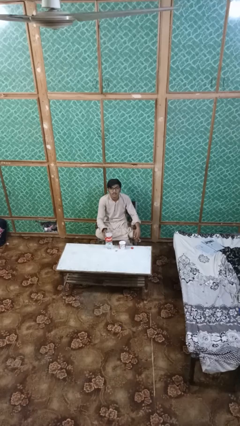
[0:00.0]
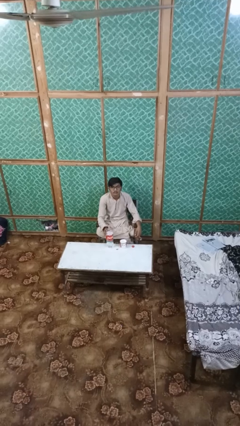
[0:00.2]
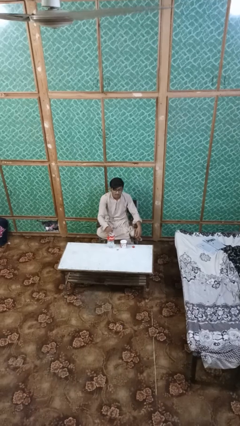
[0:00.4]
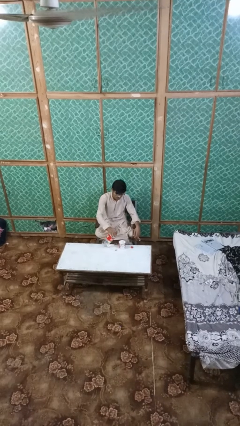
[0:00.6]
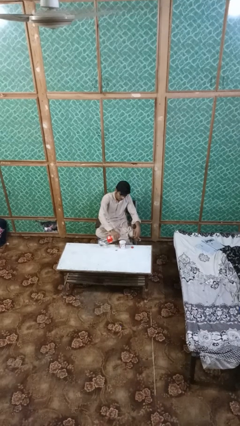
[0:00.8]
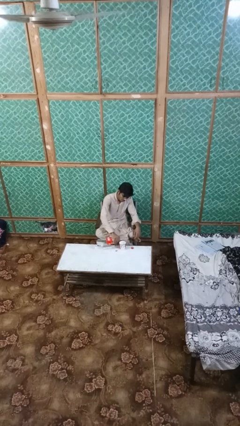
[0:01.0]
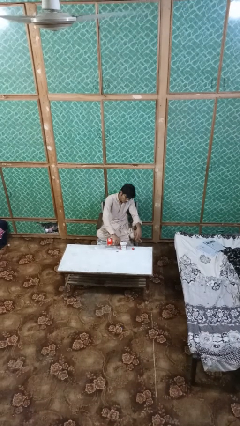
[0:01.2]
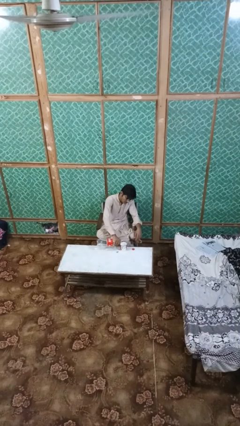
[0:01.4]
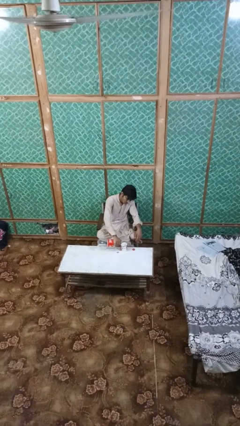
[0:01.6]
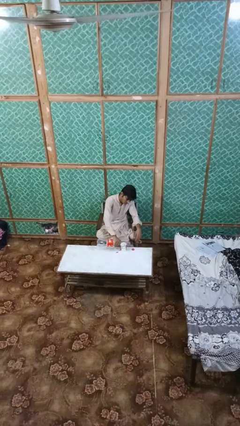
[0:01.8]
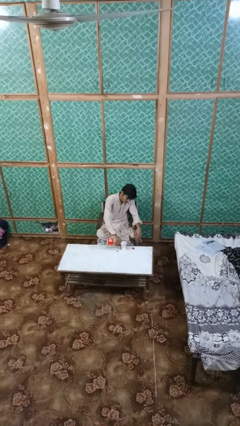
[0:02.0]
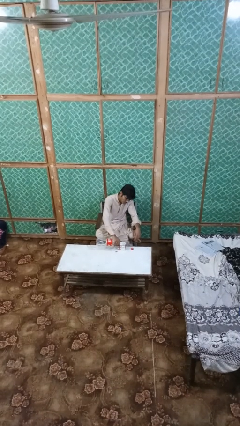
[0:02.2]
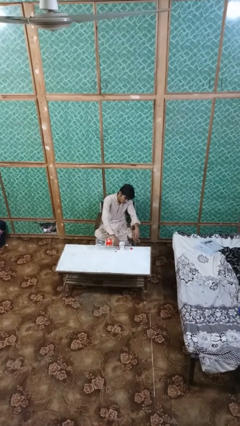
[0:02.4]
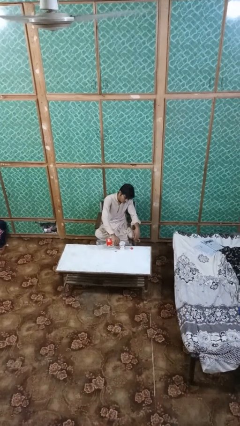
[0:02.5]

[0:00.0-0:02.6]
person pours liquid into cup

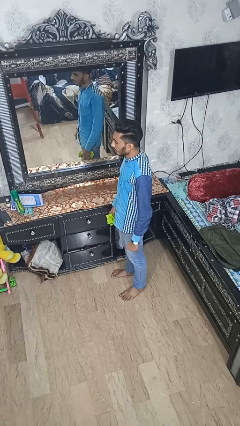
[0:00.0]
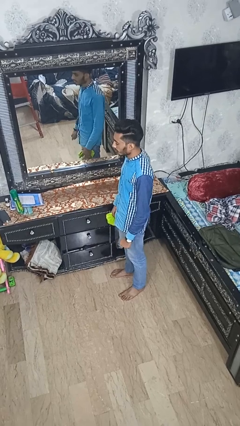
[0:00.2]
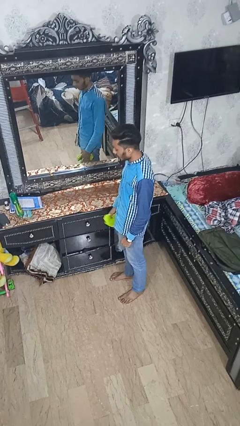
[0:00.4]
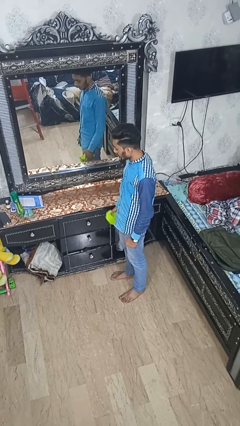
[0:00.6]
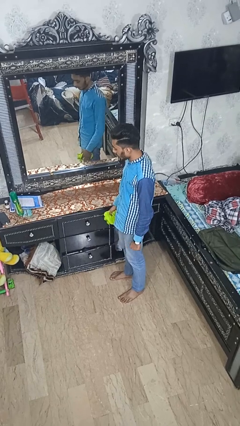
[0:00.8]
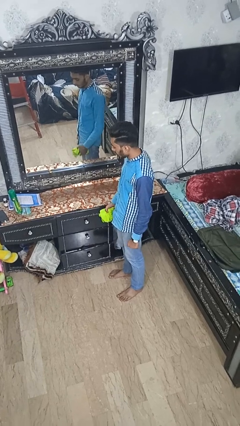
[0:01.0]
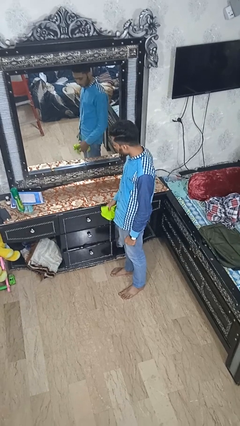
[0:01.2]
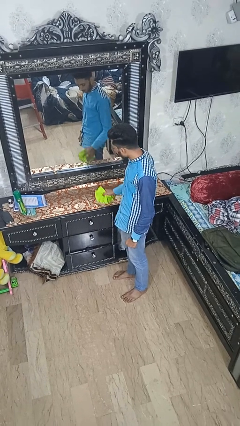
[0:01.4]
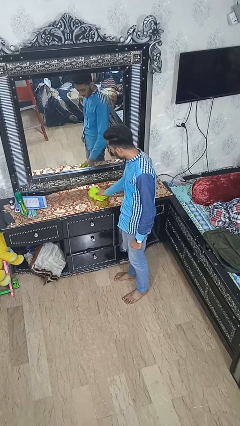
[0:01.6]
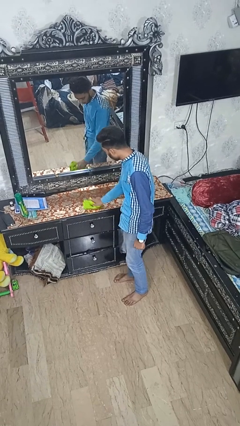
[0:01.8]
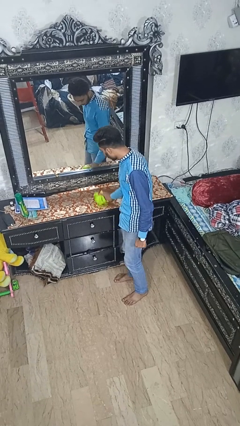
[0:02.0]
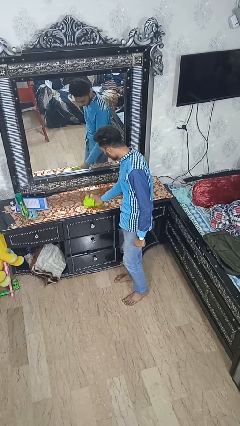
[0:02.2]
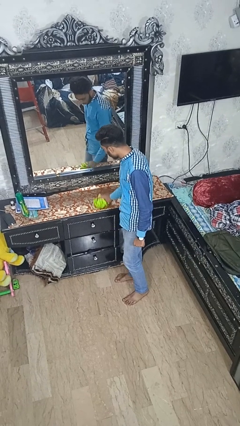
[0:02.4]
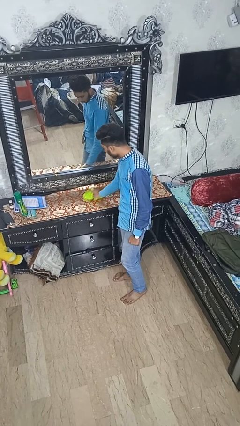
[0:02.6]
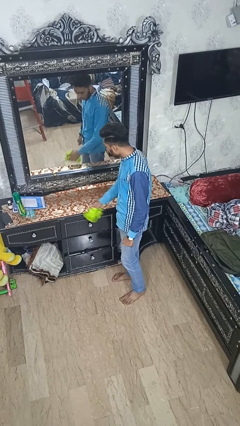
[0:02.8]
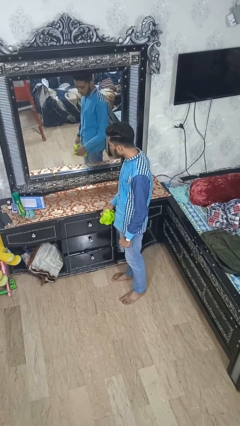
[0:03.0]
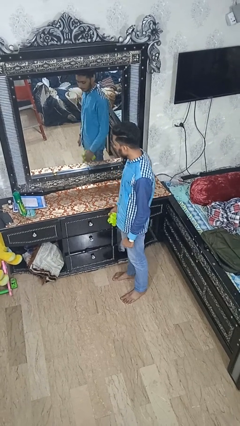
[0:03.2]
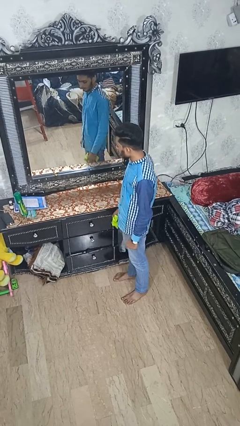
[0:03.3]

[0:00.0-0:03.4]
person cleans table with rag

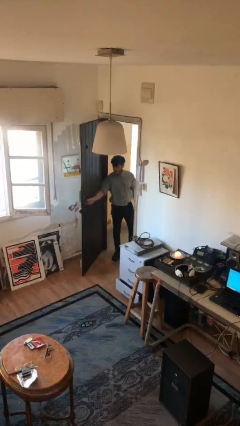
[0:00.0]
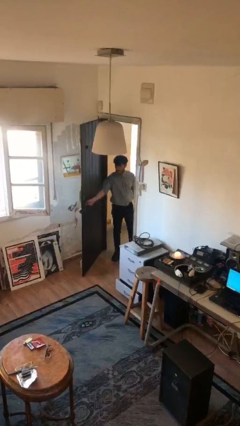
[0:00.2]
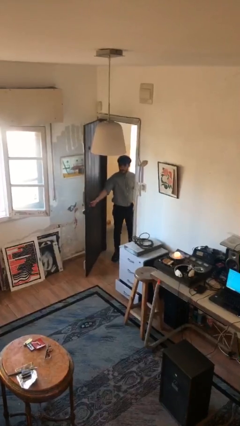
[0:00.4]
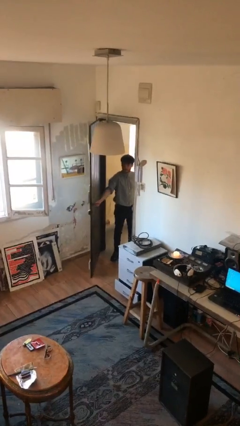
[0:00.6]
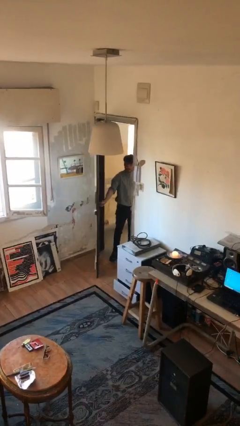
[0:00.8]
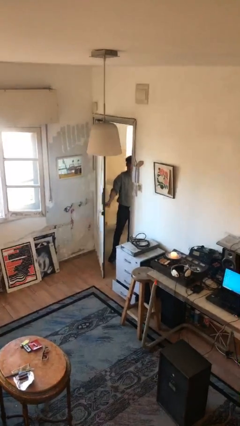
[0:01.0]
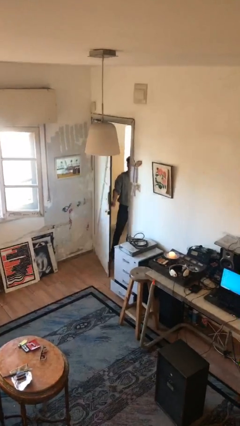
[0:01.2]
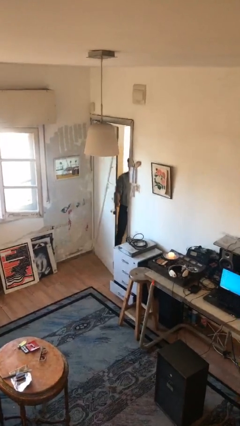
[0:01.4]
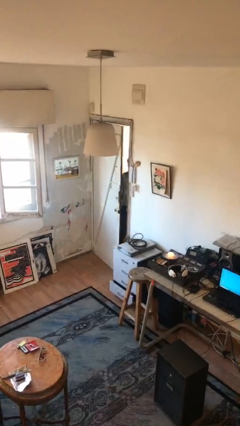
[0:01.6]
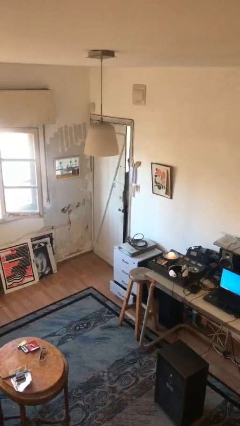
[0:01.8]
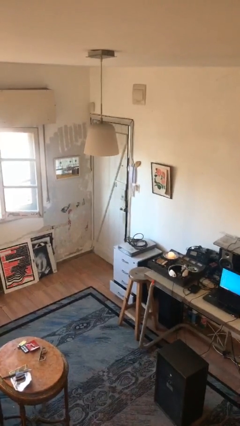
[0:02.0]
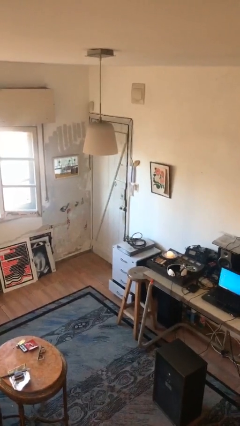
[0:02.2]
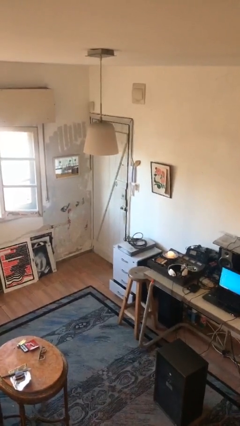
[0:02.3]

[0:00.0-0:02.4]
person closes facility door

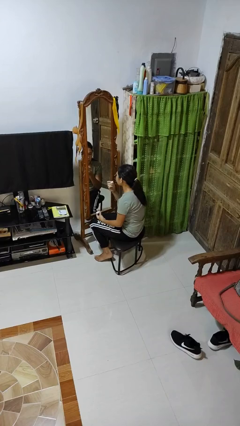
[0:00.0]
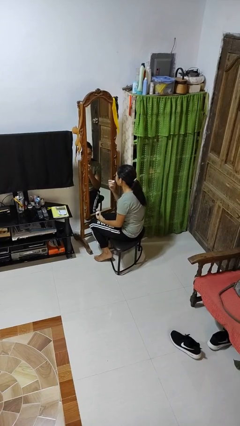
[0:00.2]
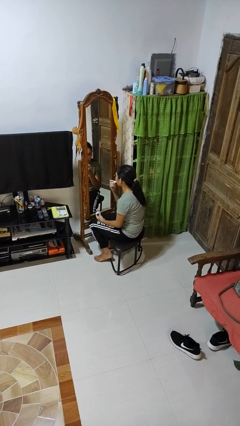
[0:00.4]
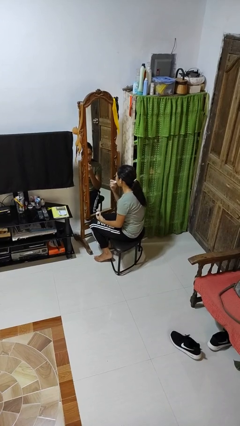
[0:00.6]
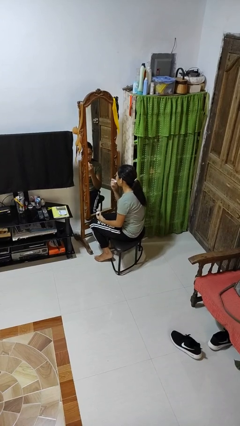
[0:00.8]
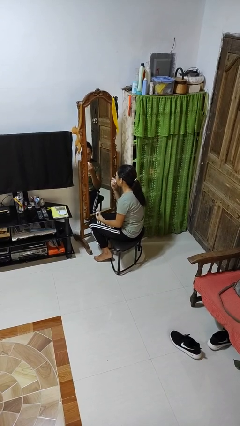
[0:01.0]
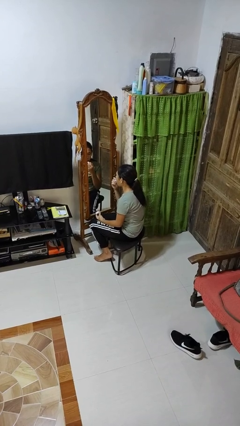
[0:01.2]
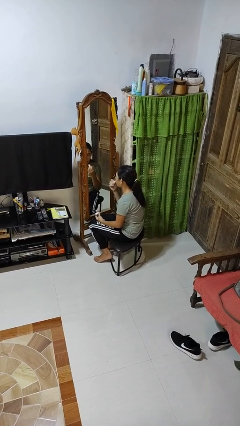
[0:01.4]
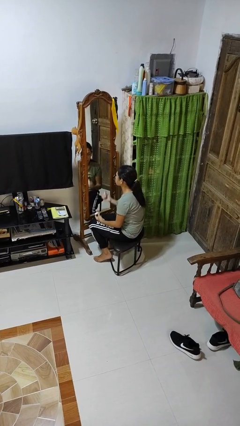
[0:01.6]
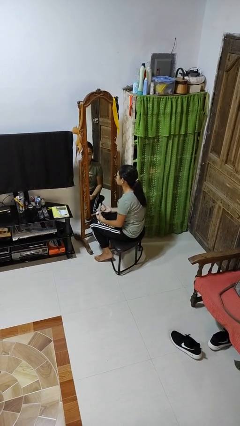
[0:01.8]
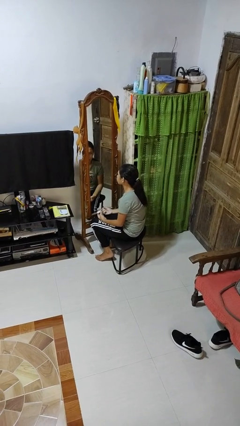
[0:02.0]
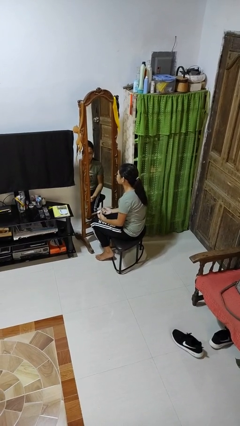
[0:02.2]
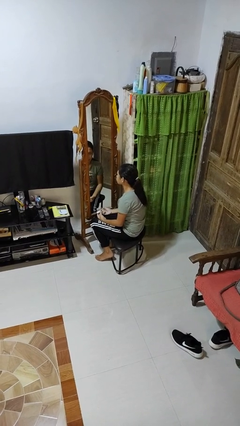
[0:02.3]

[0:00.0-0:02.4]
person applies lip makeup

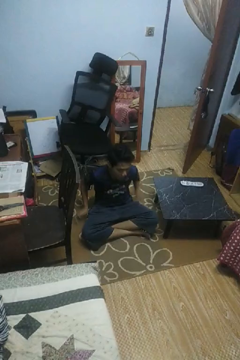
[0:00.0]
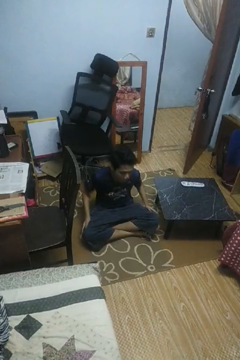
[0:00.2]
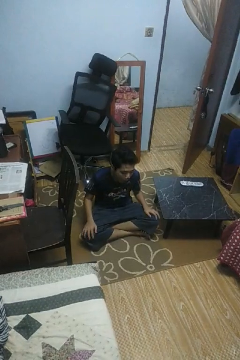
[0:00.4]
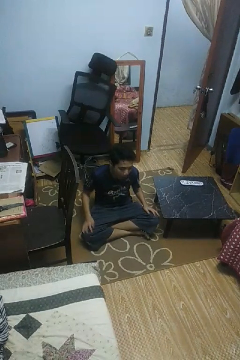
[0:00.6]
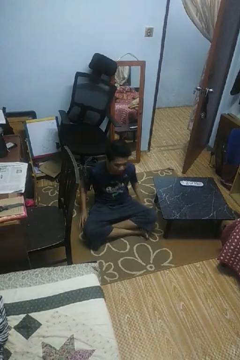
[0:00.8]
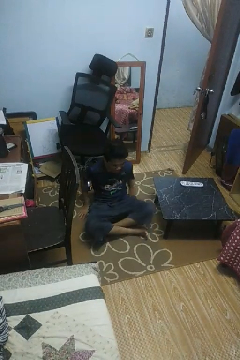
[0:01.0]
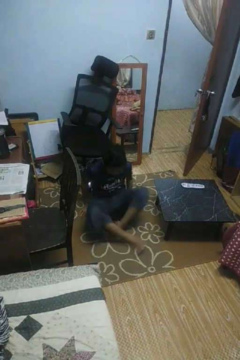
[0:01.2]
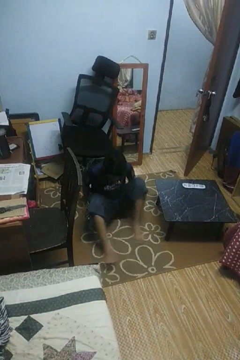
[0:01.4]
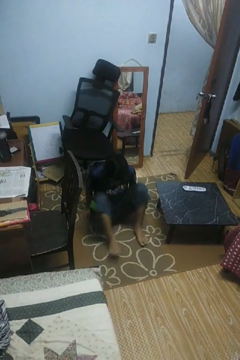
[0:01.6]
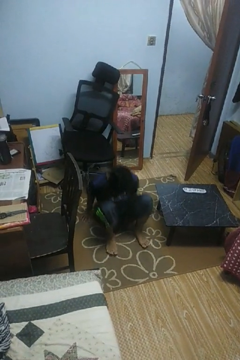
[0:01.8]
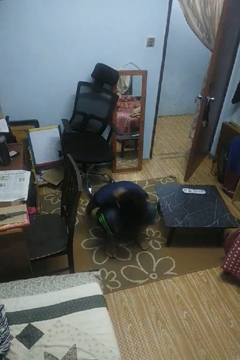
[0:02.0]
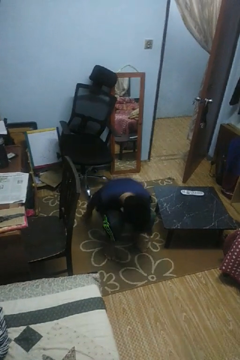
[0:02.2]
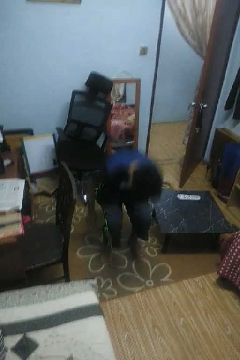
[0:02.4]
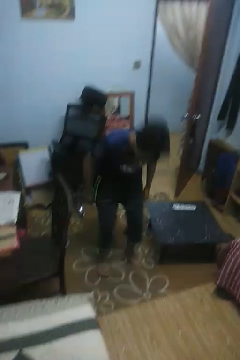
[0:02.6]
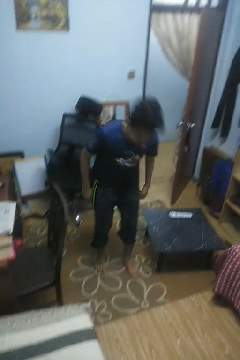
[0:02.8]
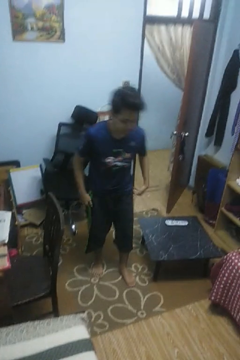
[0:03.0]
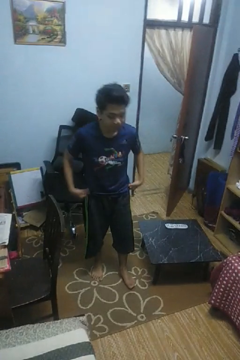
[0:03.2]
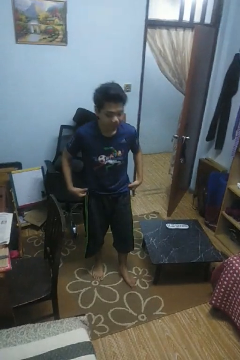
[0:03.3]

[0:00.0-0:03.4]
person stands up from floor

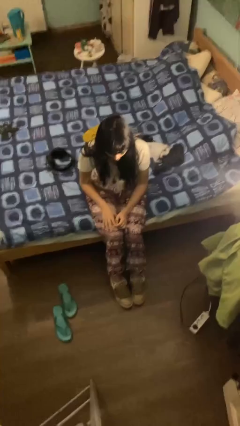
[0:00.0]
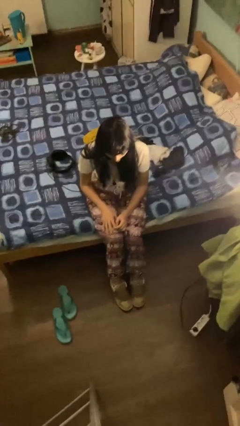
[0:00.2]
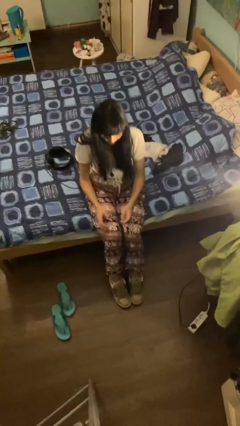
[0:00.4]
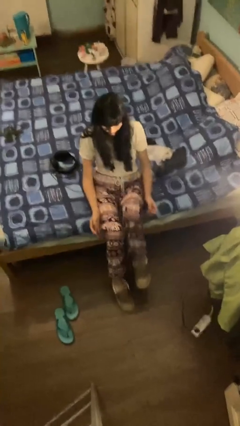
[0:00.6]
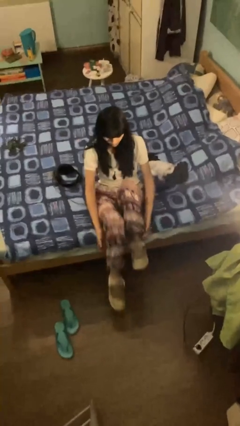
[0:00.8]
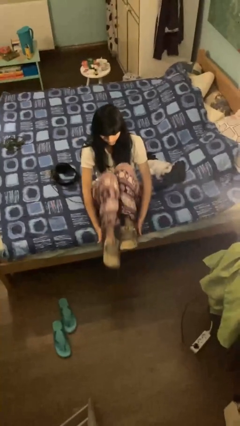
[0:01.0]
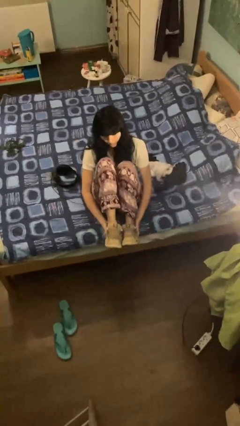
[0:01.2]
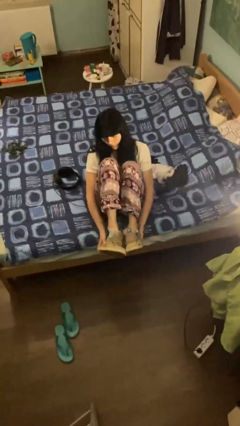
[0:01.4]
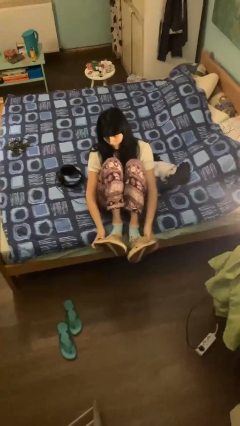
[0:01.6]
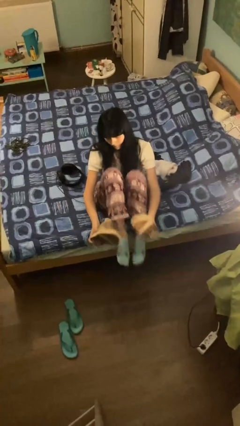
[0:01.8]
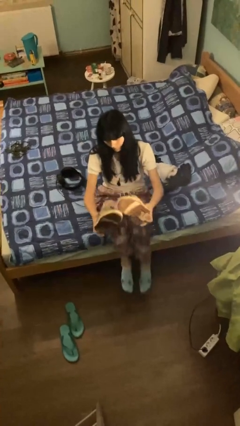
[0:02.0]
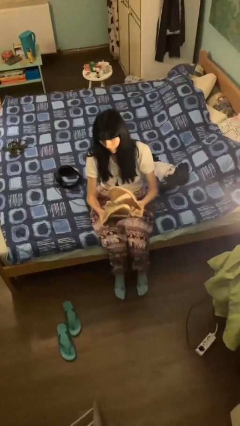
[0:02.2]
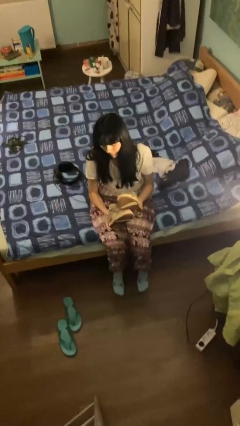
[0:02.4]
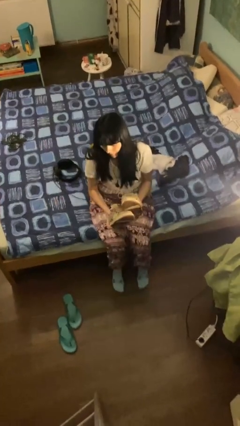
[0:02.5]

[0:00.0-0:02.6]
person takes off shoes

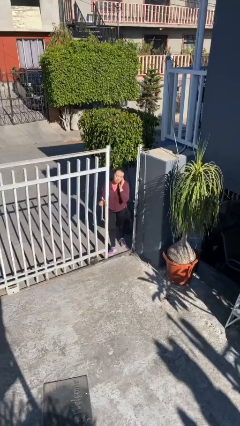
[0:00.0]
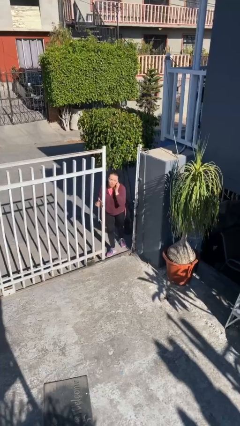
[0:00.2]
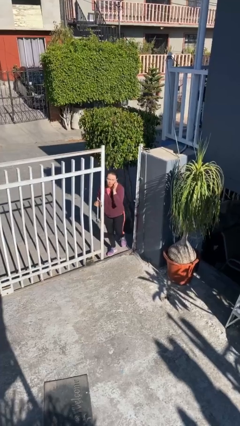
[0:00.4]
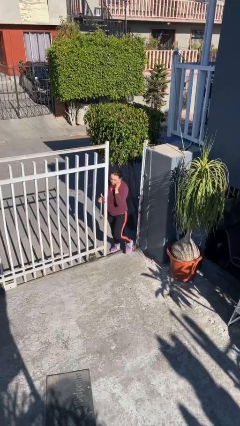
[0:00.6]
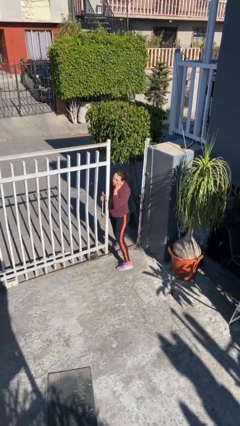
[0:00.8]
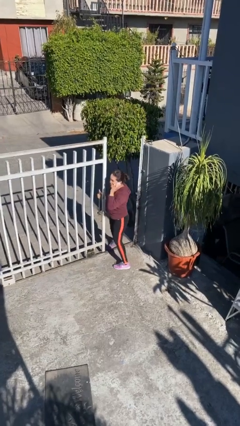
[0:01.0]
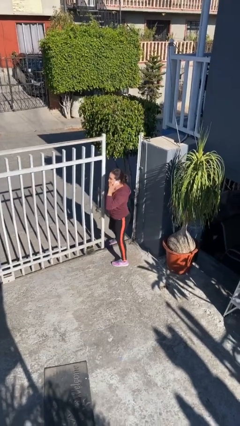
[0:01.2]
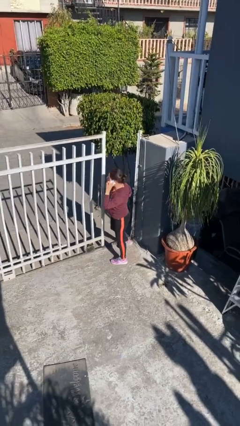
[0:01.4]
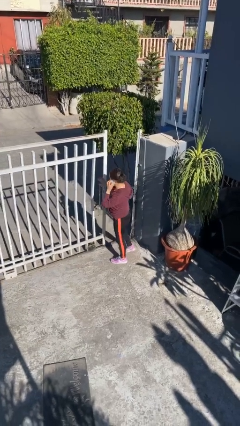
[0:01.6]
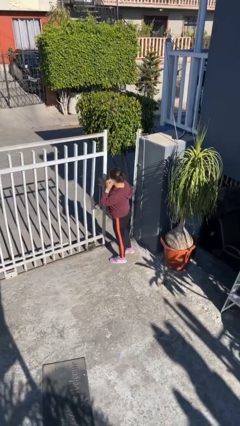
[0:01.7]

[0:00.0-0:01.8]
person enters scene through structure
